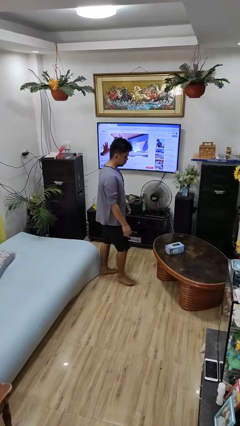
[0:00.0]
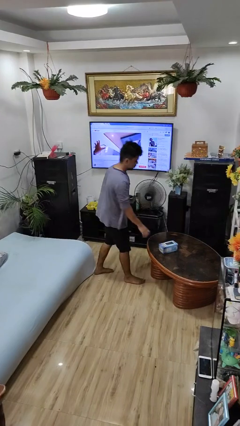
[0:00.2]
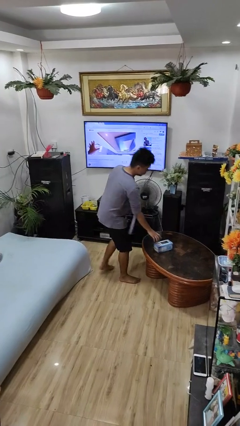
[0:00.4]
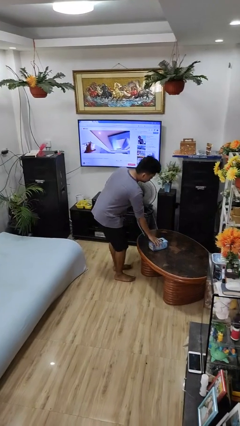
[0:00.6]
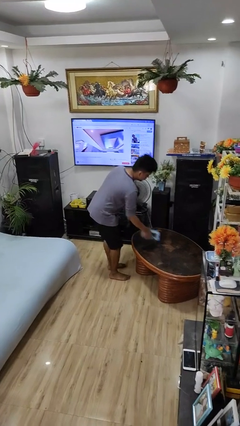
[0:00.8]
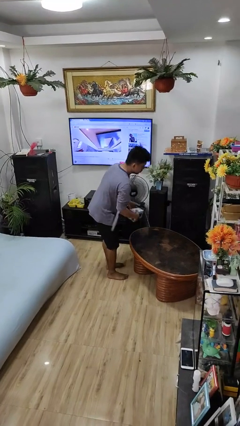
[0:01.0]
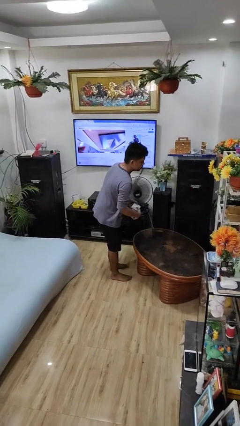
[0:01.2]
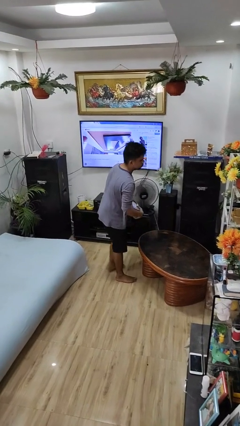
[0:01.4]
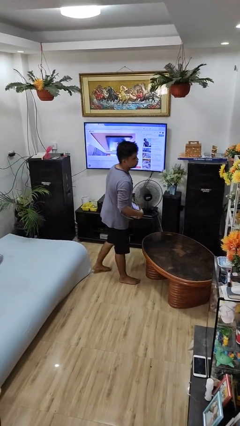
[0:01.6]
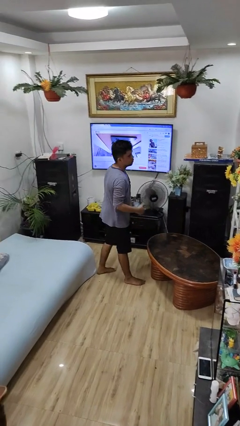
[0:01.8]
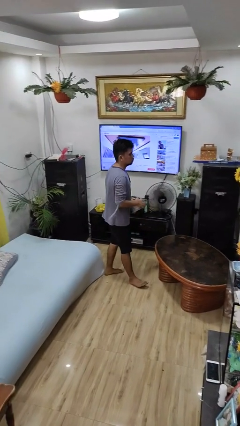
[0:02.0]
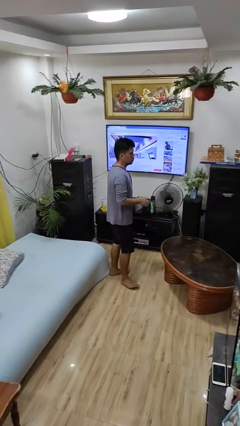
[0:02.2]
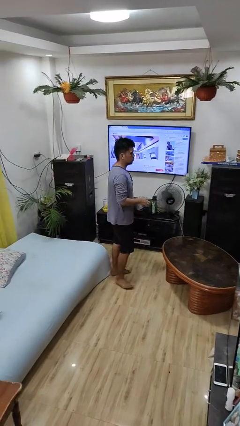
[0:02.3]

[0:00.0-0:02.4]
person picks up object from table

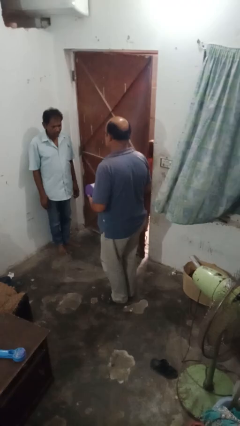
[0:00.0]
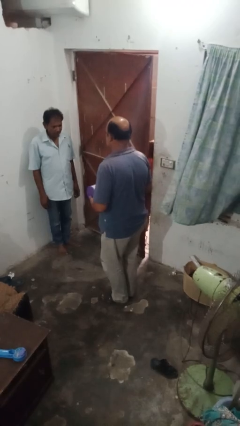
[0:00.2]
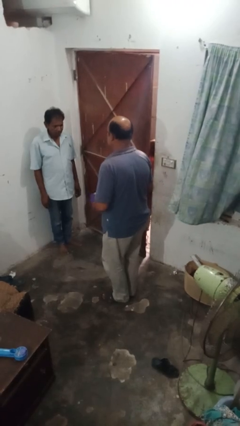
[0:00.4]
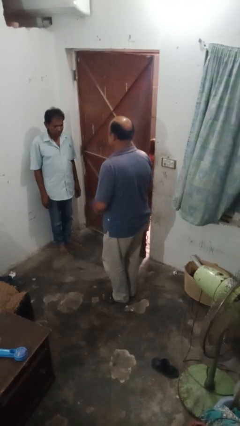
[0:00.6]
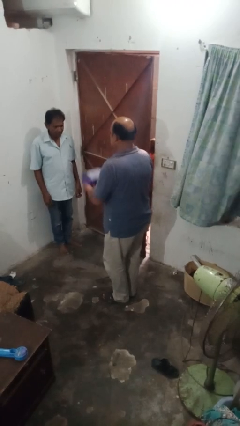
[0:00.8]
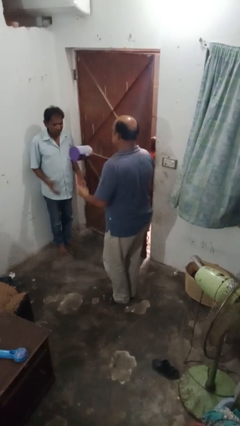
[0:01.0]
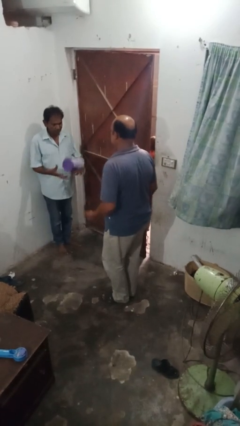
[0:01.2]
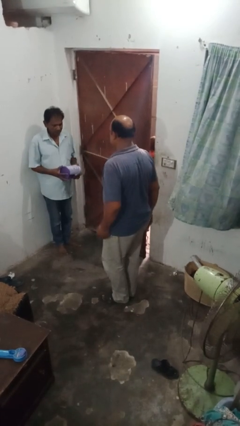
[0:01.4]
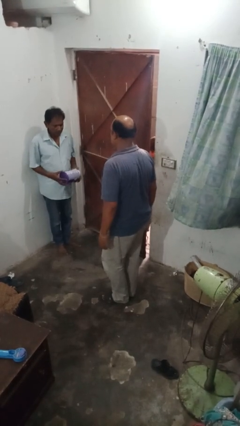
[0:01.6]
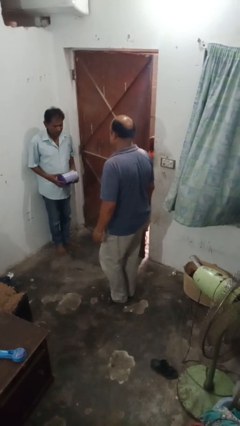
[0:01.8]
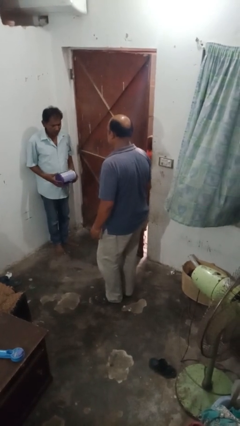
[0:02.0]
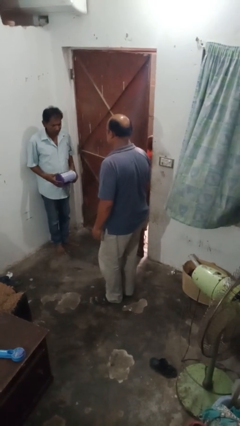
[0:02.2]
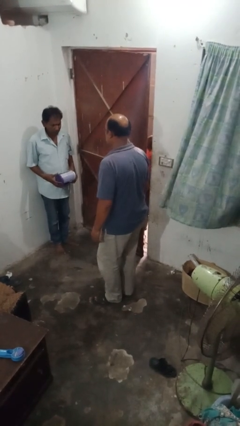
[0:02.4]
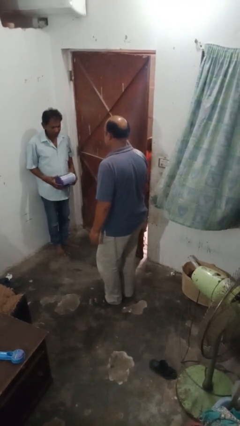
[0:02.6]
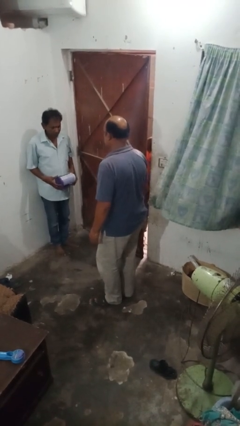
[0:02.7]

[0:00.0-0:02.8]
person throws object to person

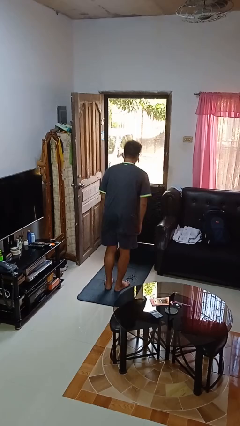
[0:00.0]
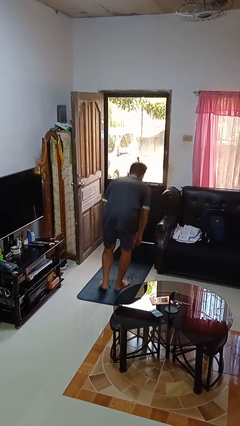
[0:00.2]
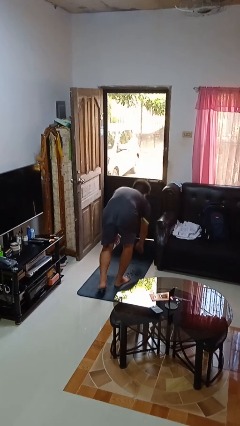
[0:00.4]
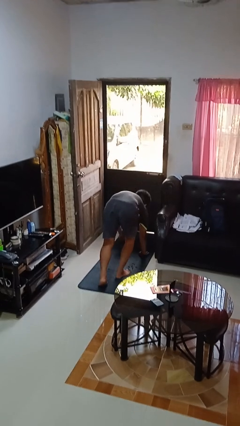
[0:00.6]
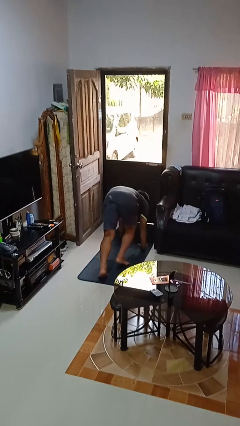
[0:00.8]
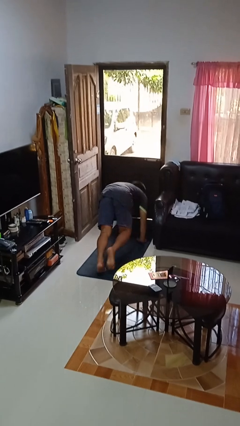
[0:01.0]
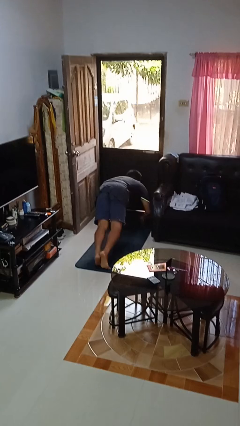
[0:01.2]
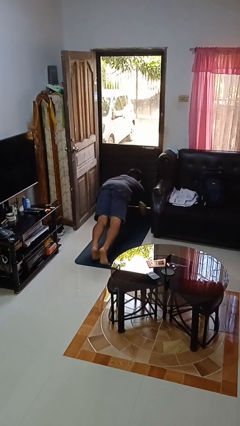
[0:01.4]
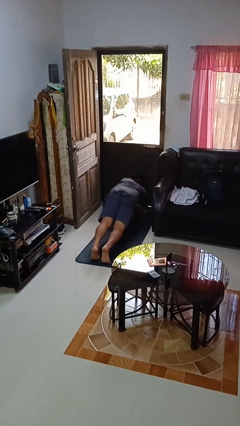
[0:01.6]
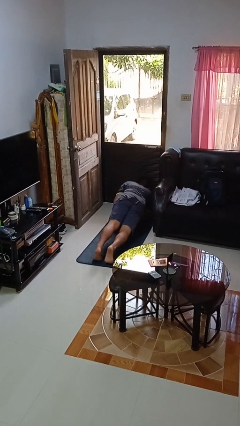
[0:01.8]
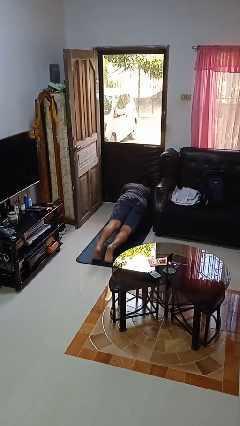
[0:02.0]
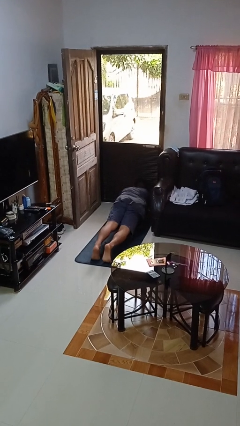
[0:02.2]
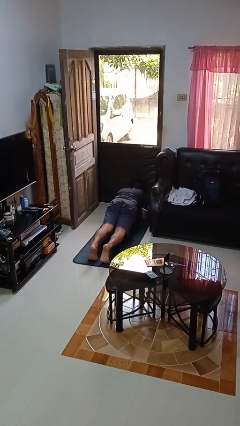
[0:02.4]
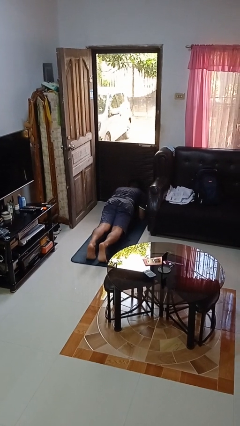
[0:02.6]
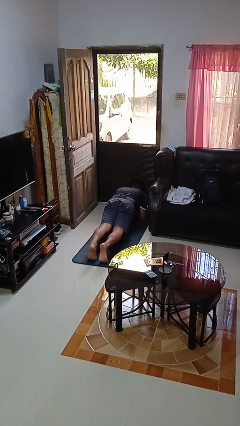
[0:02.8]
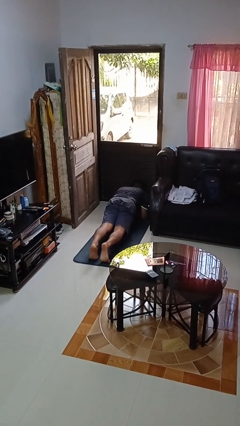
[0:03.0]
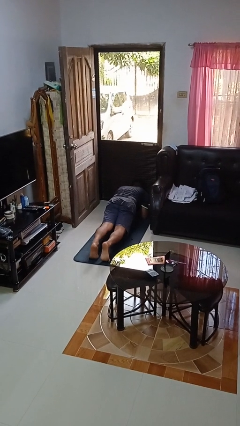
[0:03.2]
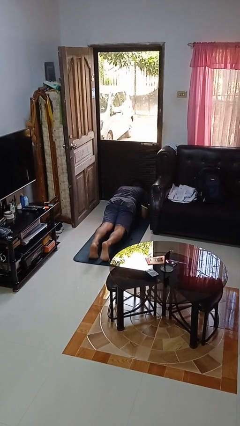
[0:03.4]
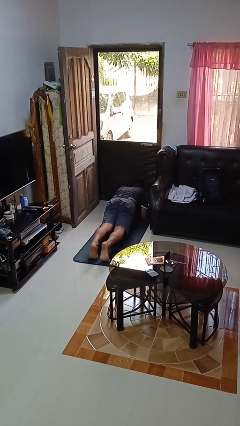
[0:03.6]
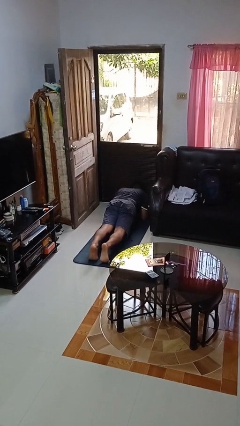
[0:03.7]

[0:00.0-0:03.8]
person exercises with plank

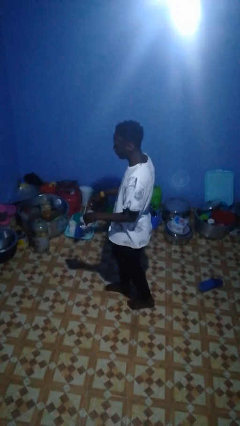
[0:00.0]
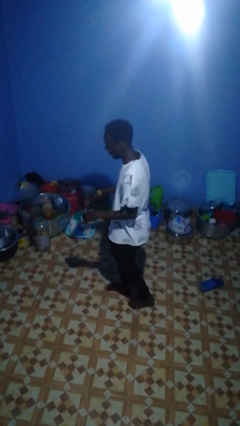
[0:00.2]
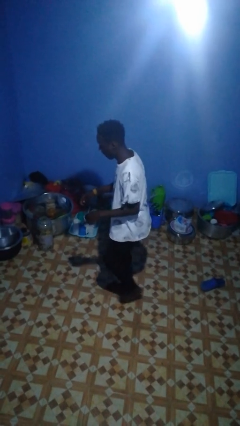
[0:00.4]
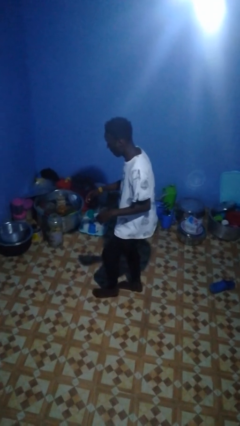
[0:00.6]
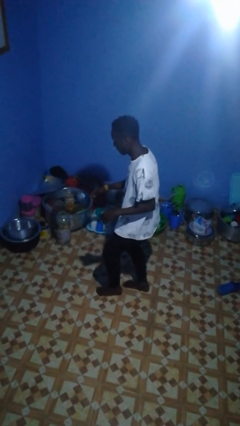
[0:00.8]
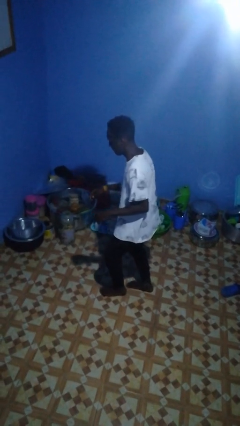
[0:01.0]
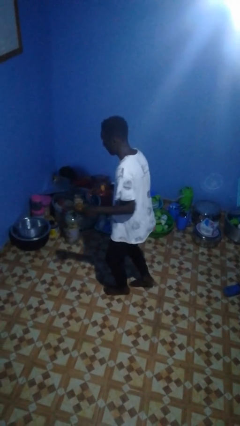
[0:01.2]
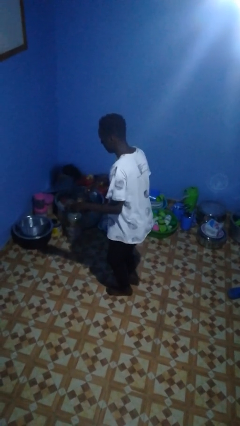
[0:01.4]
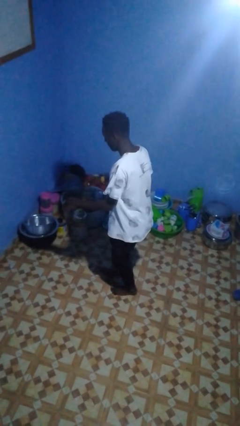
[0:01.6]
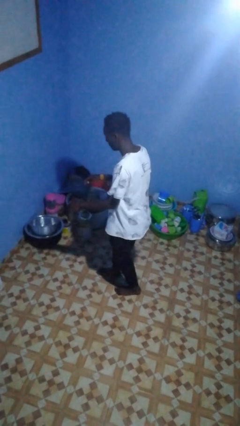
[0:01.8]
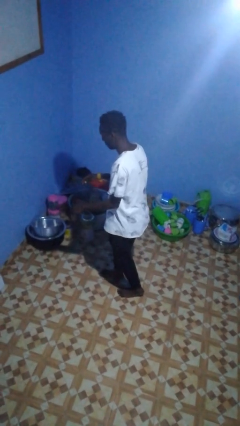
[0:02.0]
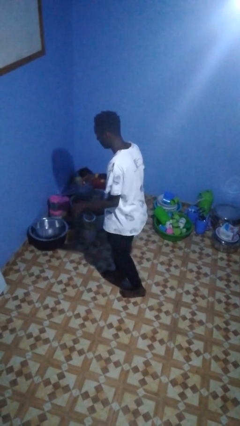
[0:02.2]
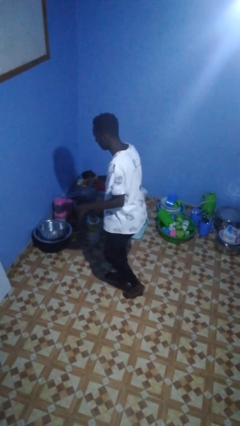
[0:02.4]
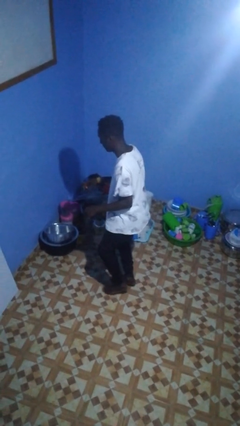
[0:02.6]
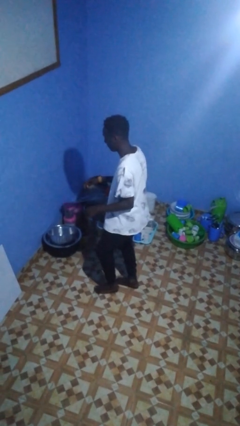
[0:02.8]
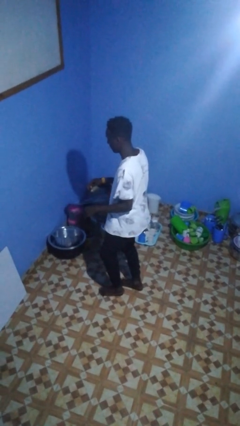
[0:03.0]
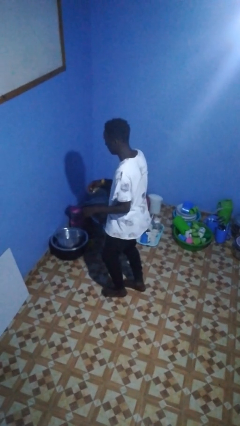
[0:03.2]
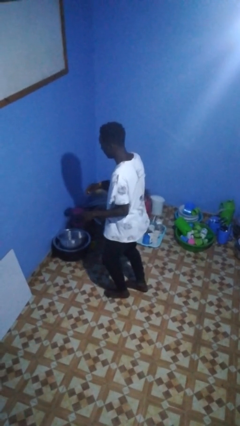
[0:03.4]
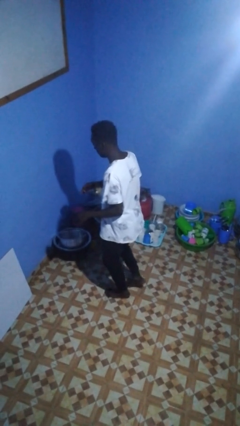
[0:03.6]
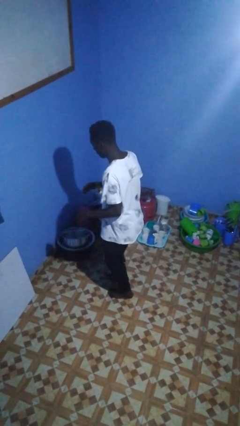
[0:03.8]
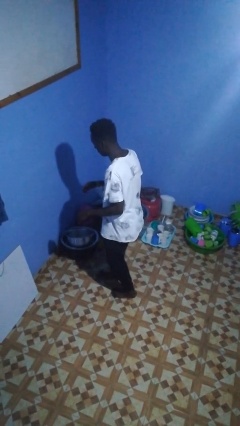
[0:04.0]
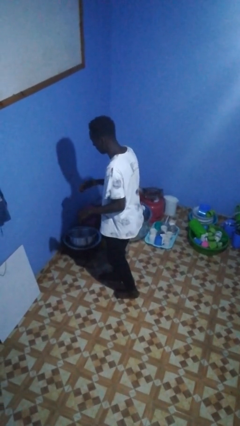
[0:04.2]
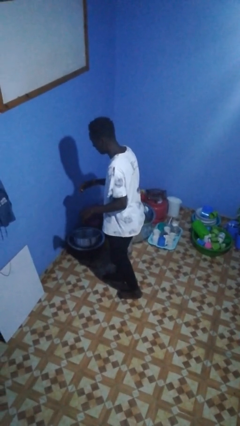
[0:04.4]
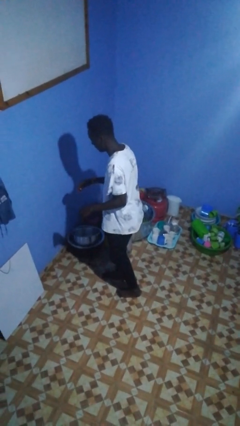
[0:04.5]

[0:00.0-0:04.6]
person walks tiptoe

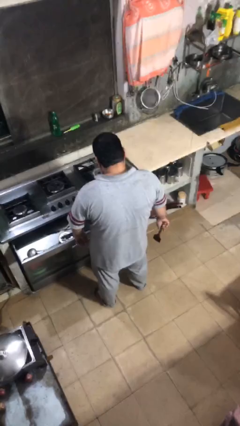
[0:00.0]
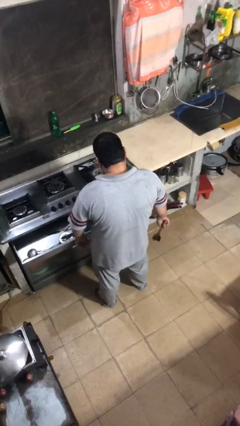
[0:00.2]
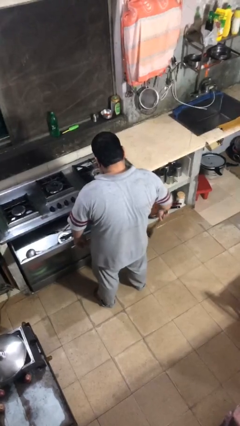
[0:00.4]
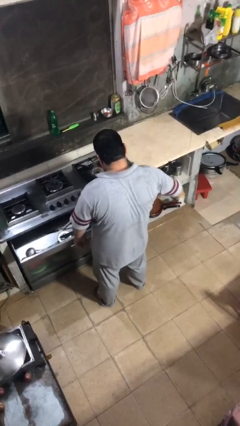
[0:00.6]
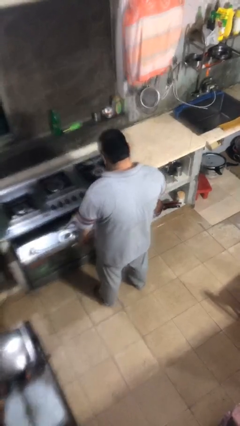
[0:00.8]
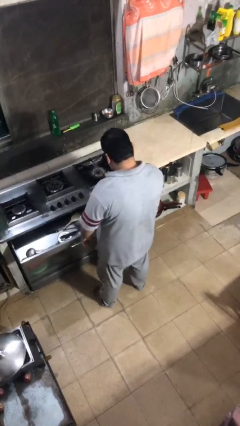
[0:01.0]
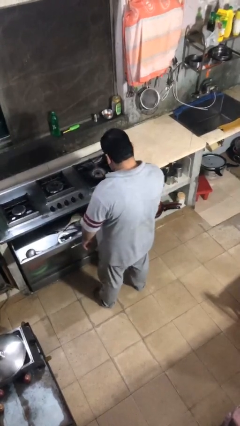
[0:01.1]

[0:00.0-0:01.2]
person puts object into kitchen drawer

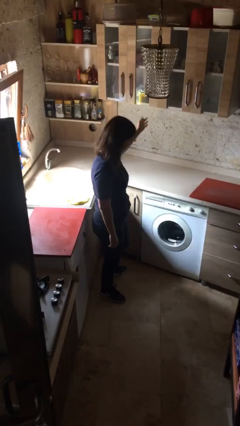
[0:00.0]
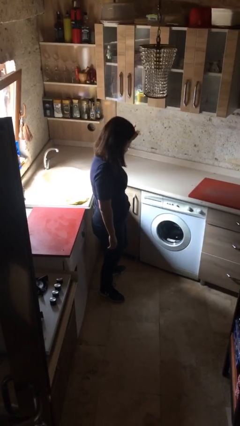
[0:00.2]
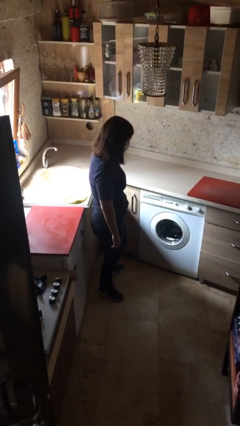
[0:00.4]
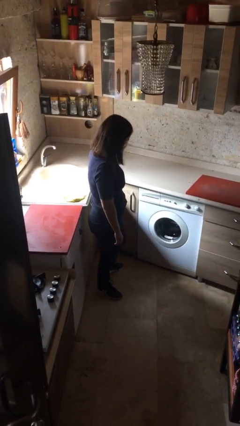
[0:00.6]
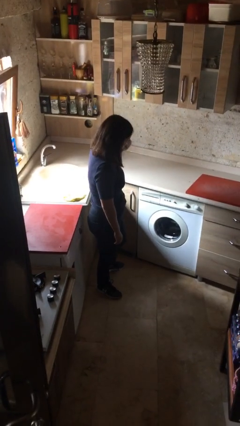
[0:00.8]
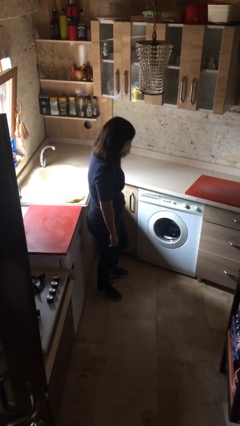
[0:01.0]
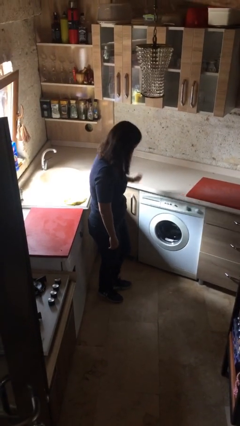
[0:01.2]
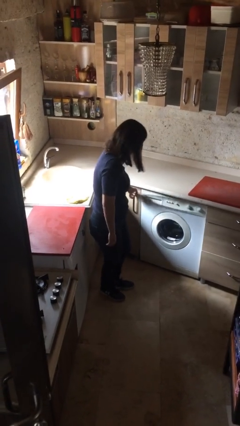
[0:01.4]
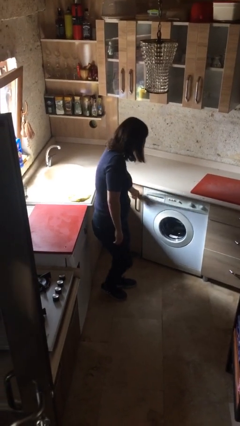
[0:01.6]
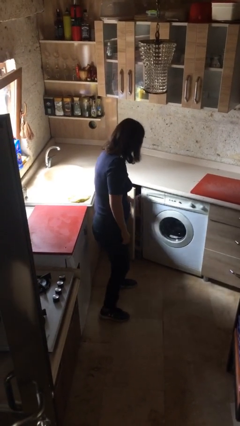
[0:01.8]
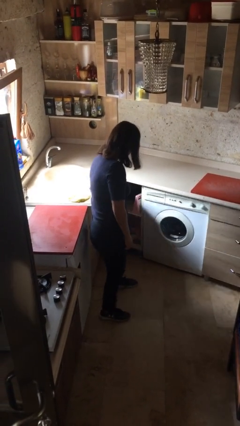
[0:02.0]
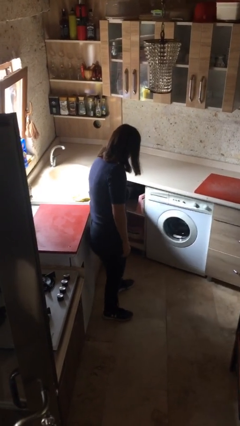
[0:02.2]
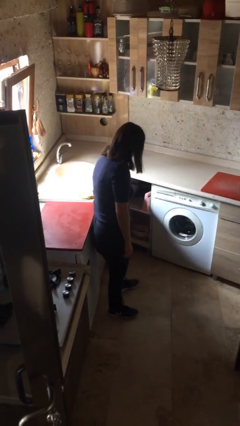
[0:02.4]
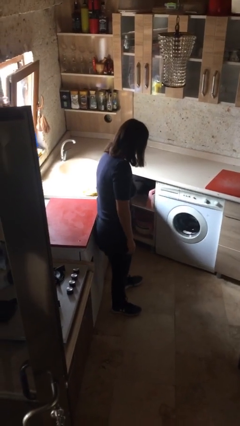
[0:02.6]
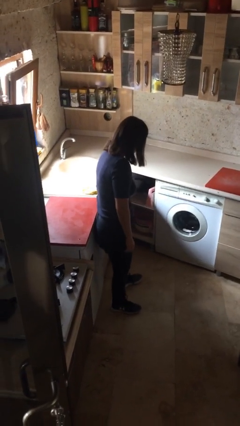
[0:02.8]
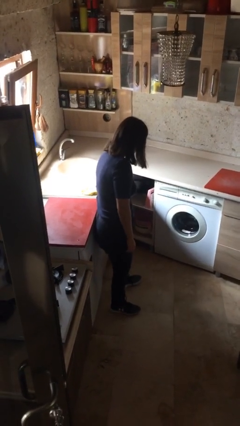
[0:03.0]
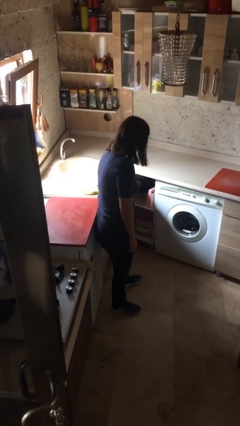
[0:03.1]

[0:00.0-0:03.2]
person opens cabinet
